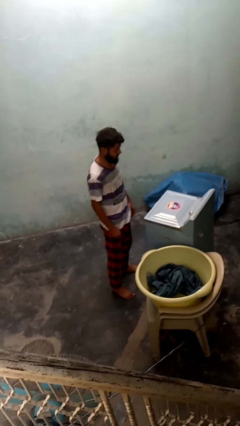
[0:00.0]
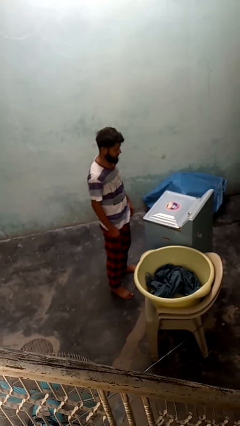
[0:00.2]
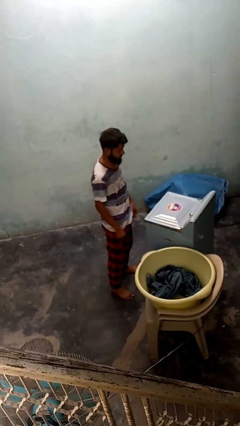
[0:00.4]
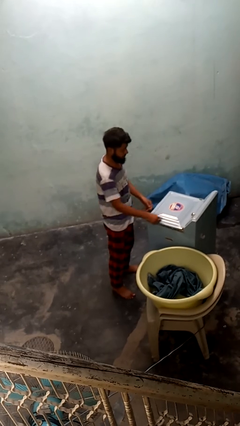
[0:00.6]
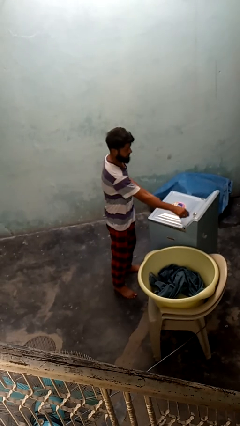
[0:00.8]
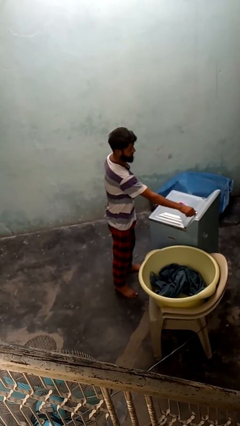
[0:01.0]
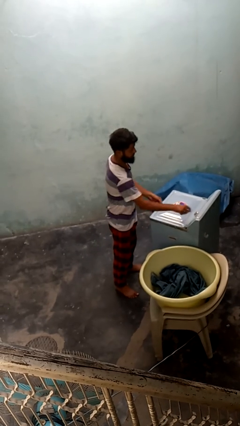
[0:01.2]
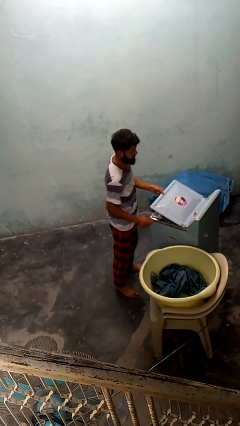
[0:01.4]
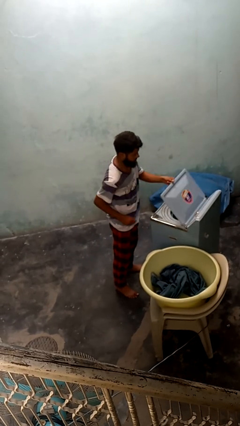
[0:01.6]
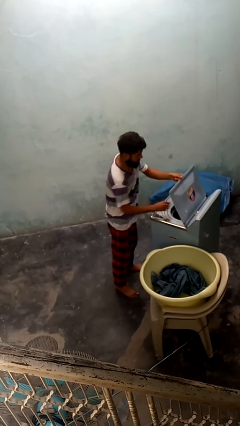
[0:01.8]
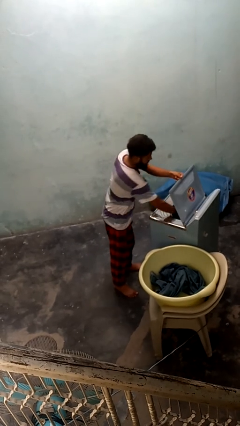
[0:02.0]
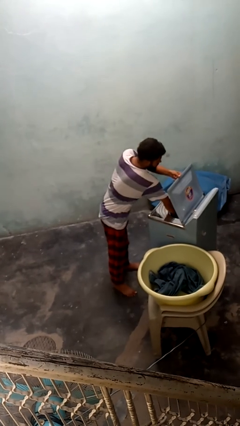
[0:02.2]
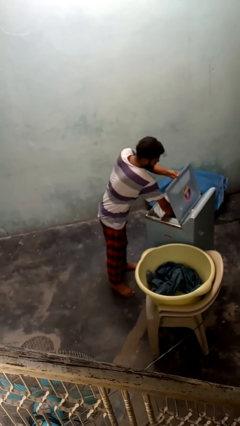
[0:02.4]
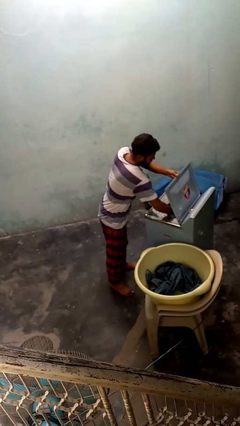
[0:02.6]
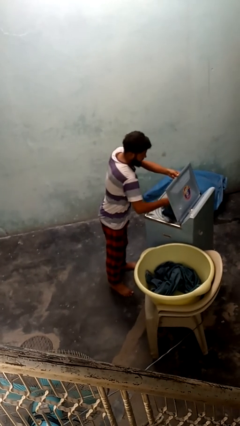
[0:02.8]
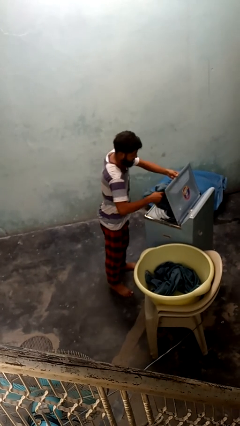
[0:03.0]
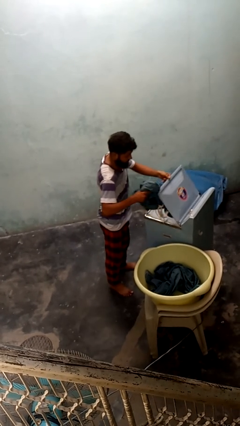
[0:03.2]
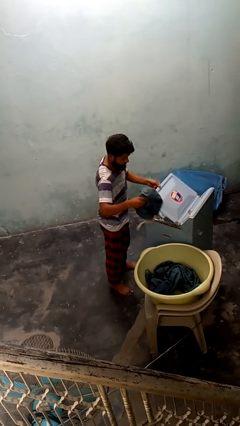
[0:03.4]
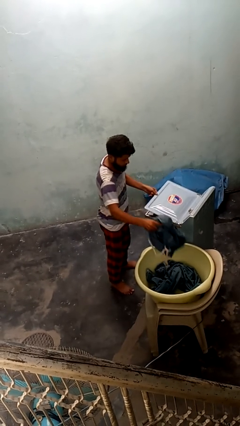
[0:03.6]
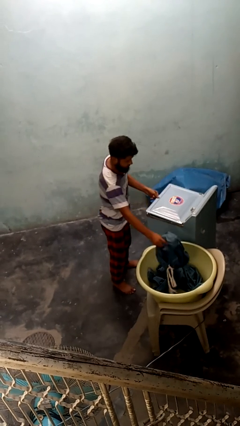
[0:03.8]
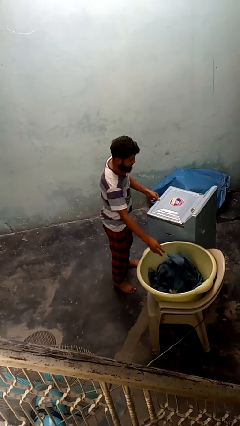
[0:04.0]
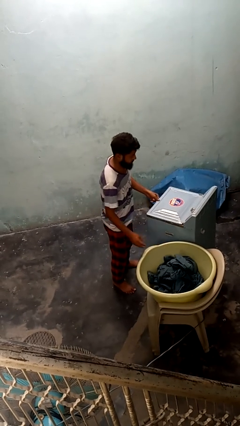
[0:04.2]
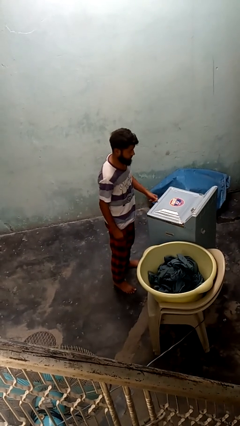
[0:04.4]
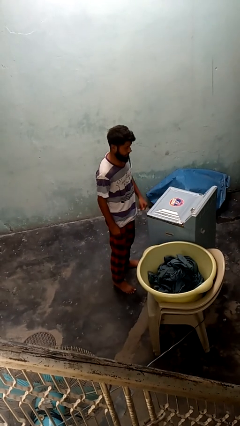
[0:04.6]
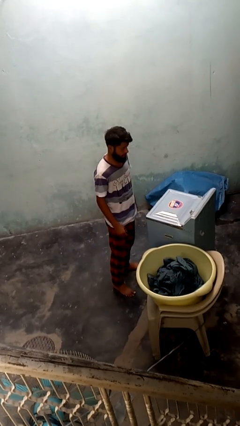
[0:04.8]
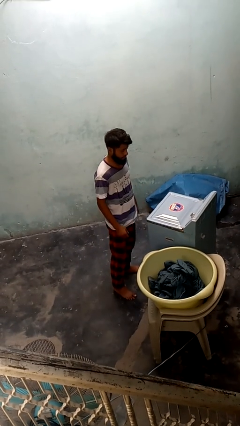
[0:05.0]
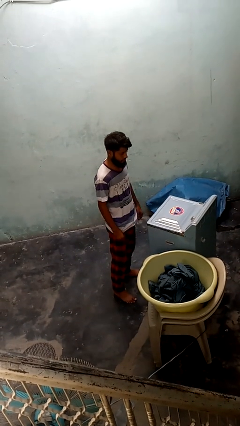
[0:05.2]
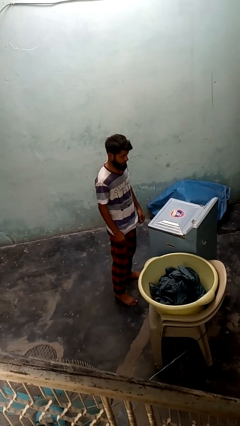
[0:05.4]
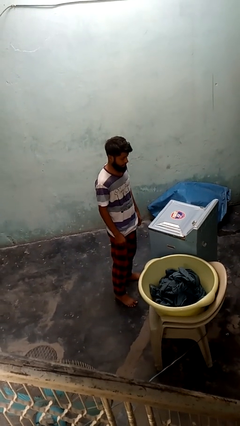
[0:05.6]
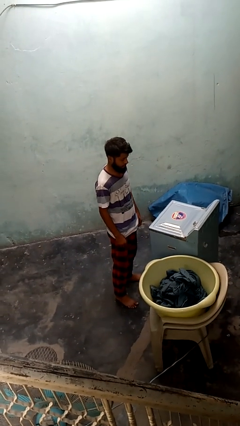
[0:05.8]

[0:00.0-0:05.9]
person unloads dryer

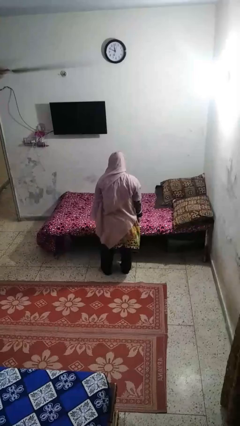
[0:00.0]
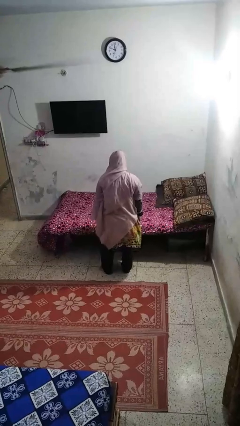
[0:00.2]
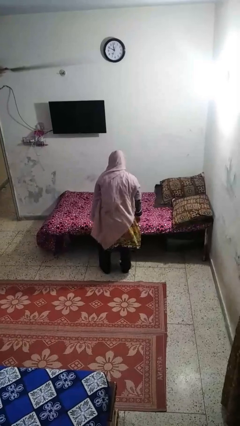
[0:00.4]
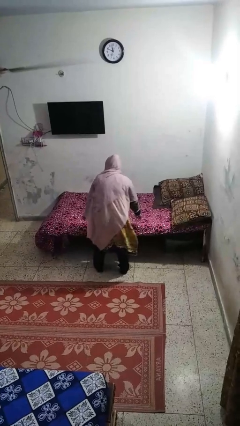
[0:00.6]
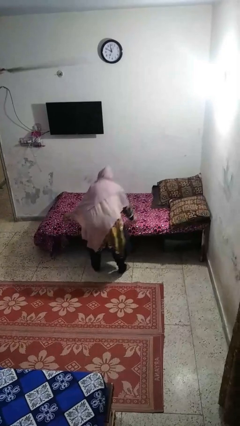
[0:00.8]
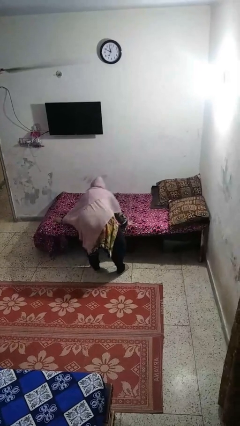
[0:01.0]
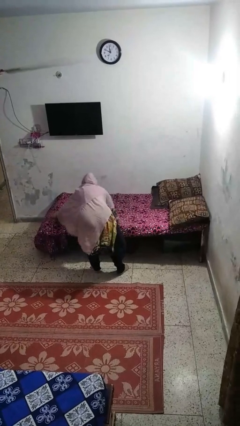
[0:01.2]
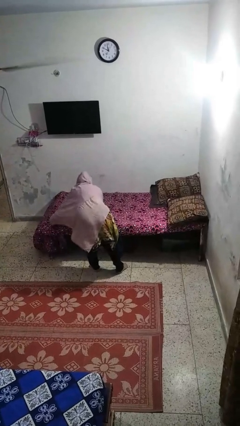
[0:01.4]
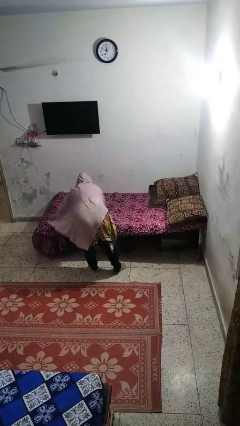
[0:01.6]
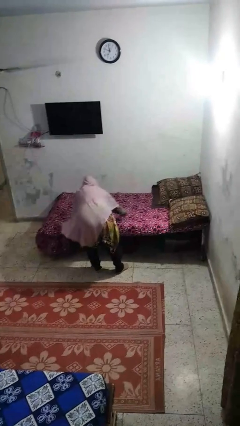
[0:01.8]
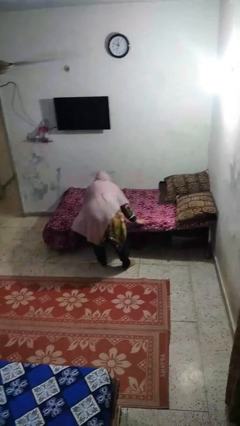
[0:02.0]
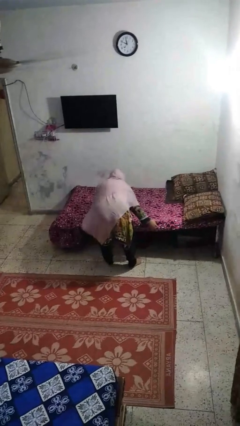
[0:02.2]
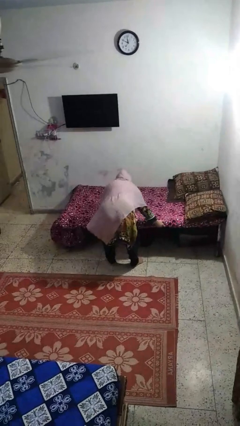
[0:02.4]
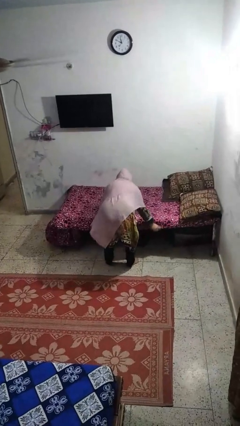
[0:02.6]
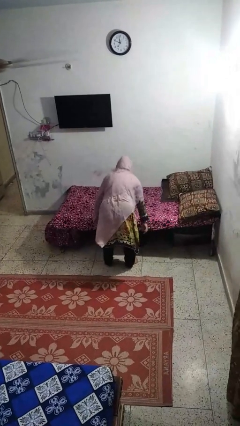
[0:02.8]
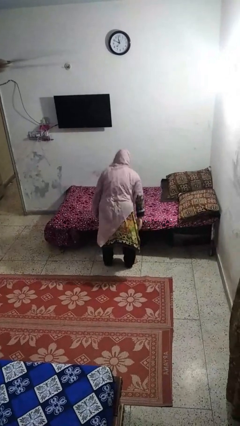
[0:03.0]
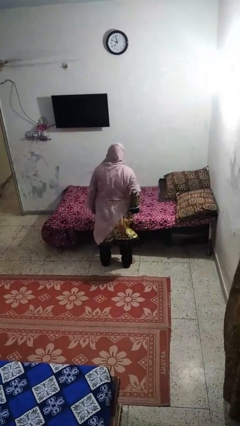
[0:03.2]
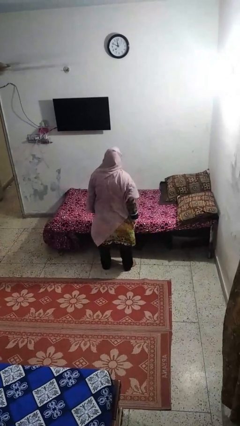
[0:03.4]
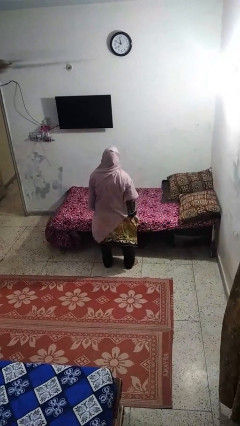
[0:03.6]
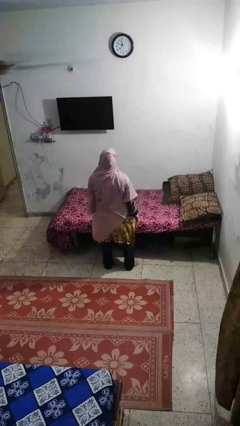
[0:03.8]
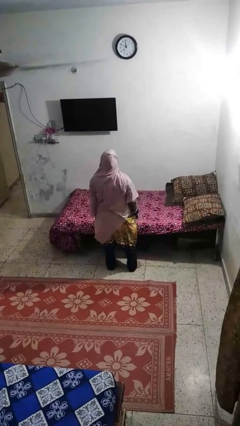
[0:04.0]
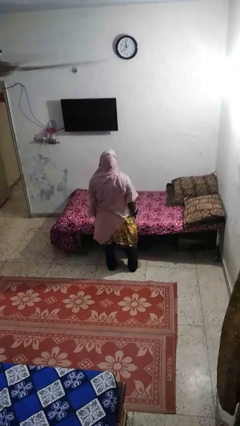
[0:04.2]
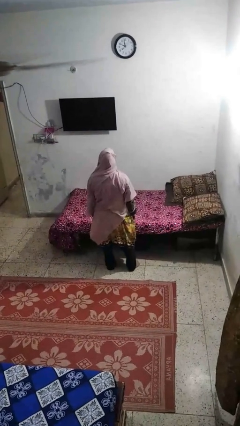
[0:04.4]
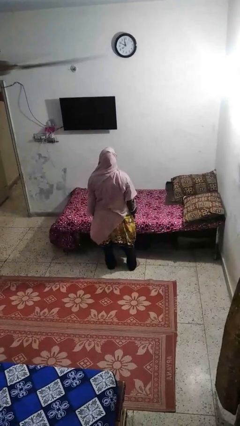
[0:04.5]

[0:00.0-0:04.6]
person makes bed

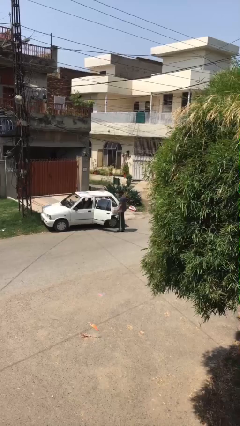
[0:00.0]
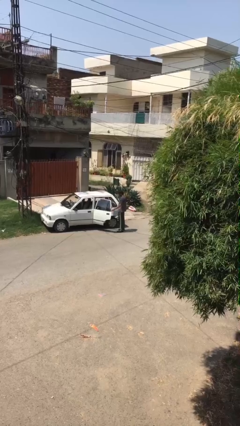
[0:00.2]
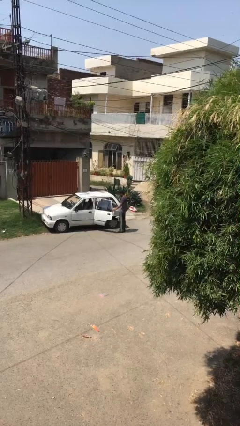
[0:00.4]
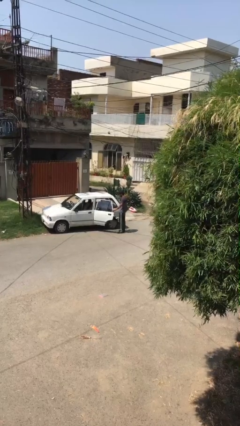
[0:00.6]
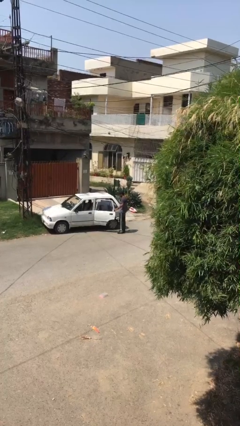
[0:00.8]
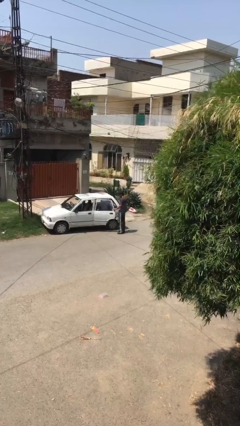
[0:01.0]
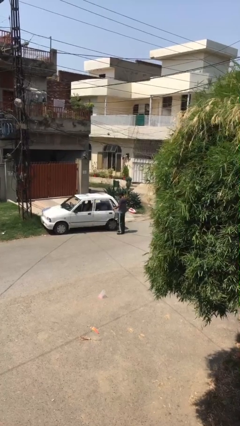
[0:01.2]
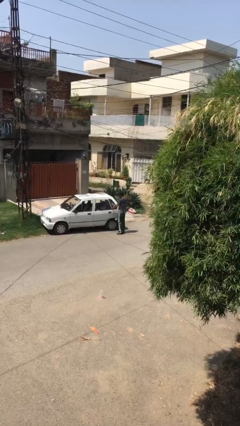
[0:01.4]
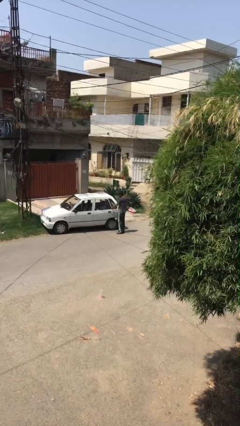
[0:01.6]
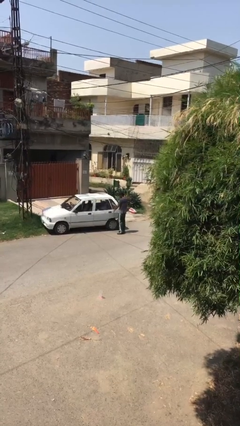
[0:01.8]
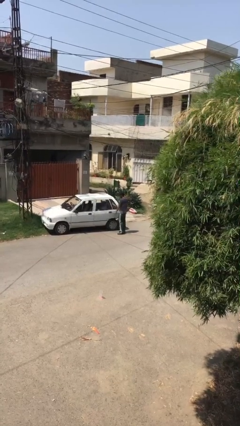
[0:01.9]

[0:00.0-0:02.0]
person closes car door

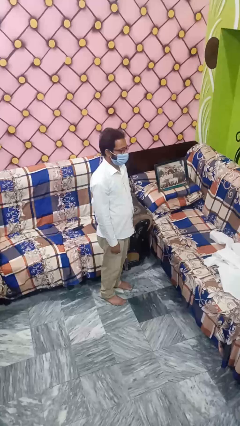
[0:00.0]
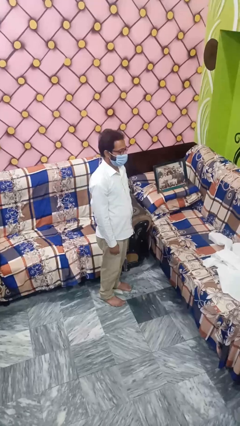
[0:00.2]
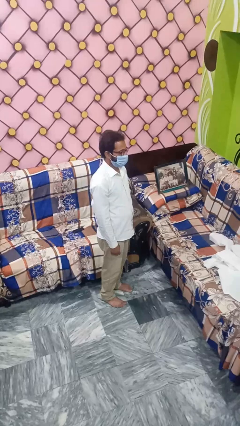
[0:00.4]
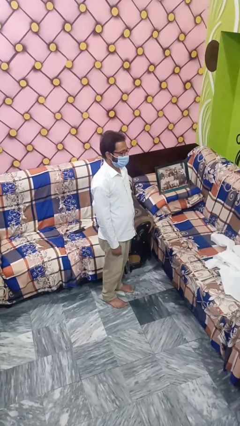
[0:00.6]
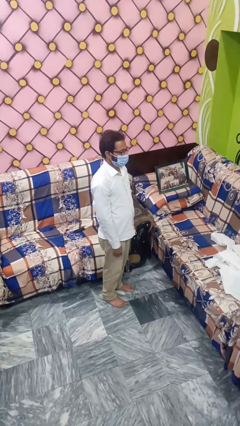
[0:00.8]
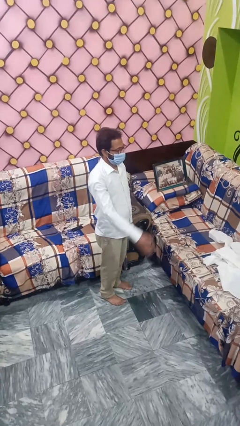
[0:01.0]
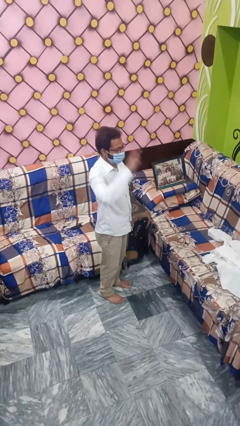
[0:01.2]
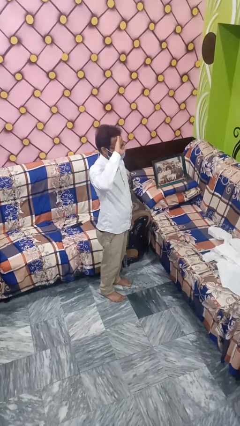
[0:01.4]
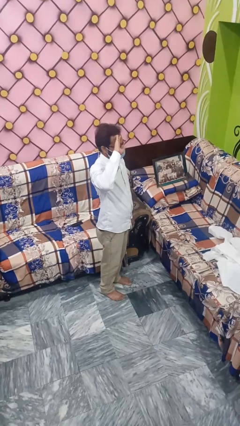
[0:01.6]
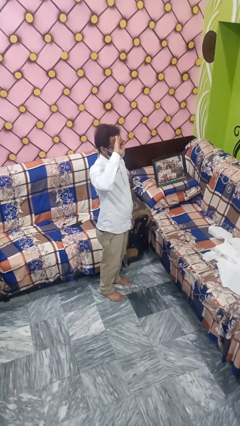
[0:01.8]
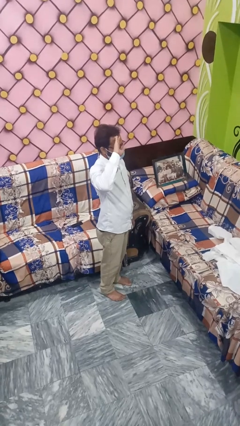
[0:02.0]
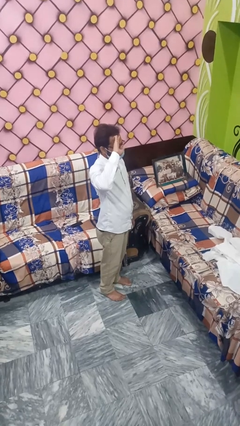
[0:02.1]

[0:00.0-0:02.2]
person salutes

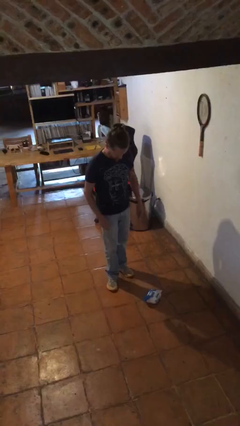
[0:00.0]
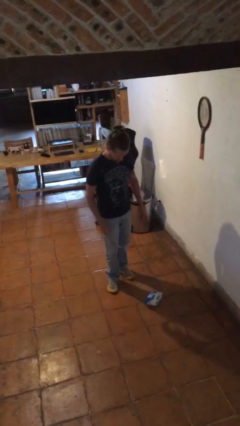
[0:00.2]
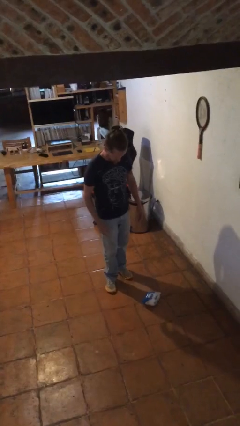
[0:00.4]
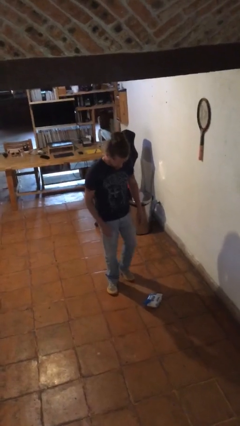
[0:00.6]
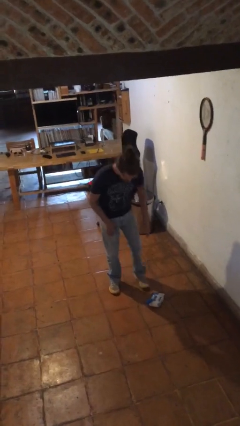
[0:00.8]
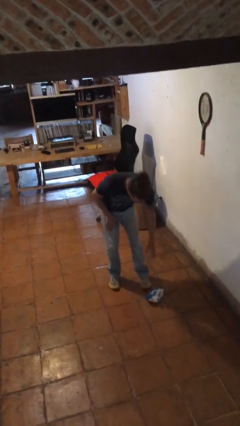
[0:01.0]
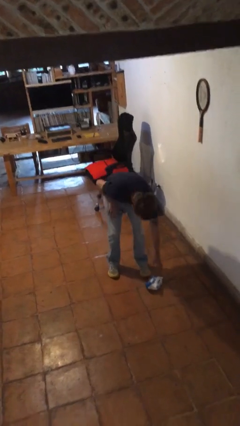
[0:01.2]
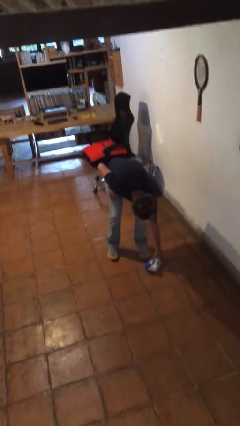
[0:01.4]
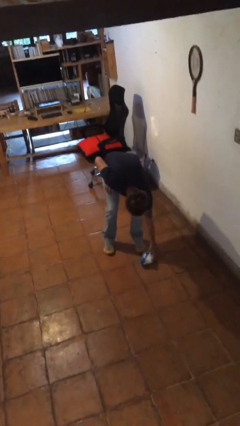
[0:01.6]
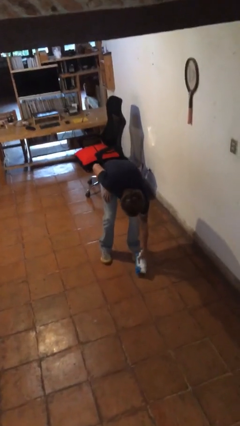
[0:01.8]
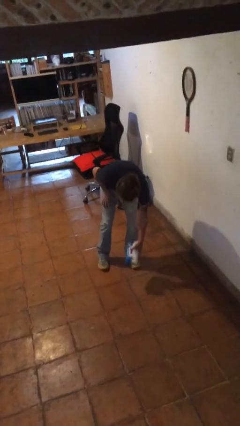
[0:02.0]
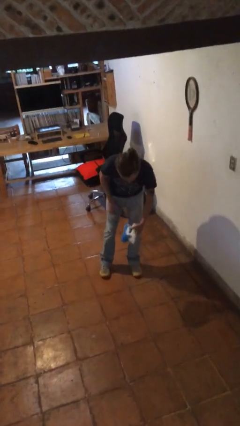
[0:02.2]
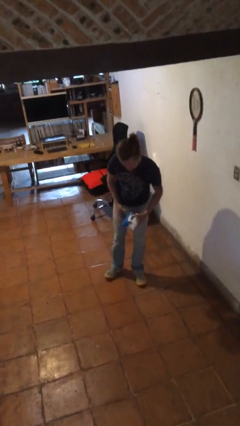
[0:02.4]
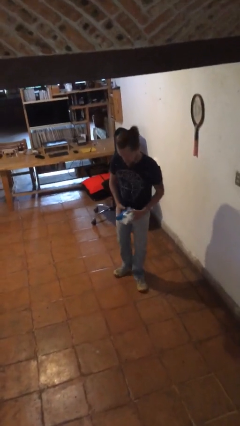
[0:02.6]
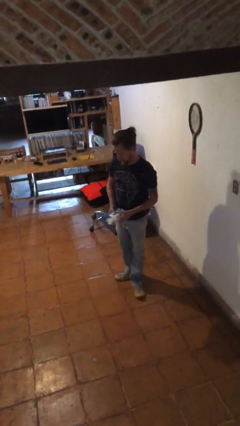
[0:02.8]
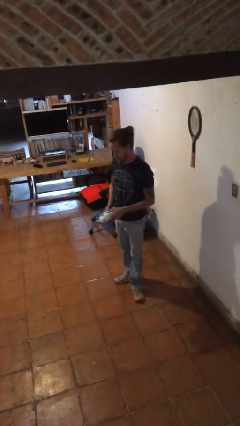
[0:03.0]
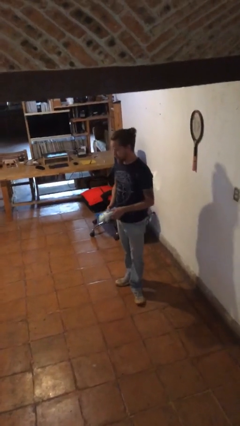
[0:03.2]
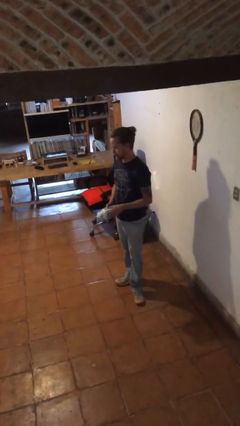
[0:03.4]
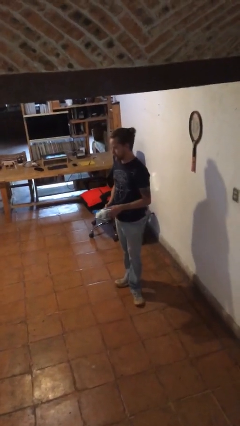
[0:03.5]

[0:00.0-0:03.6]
person picks up object from floor
